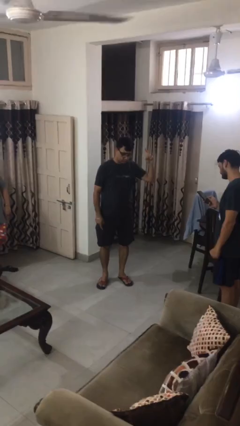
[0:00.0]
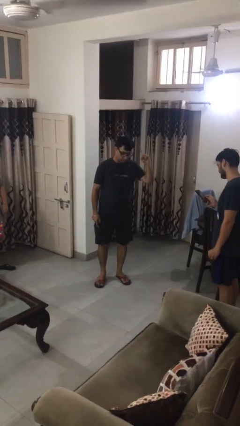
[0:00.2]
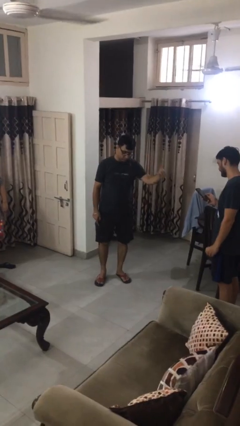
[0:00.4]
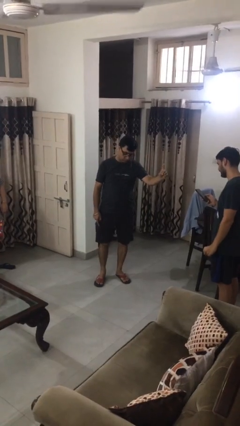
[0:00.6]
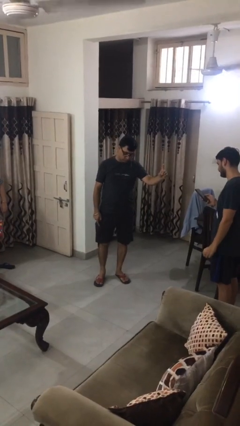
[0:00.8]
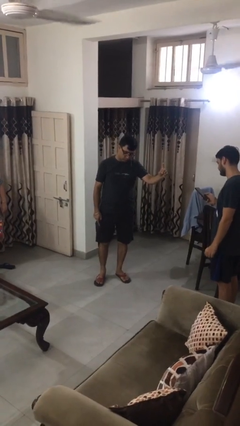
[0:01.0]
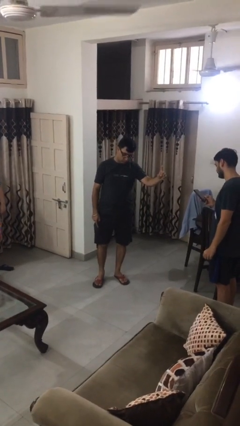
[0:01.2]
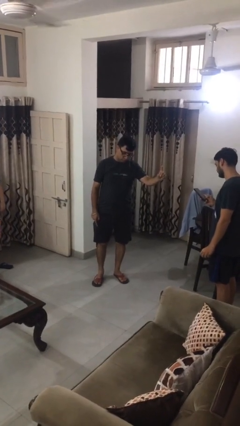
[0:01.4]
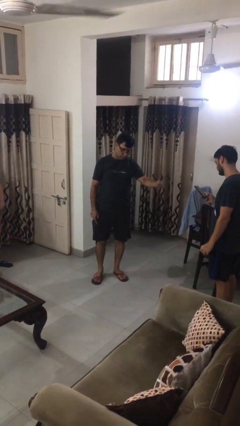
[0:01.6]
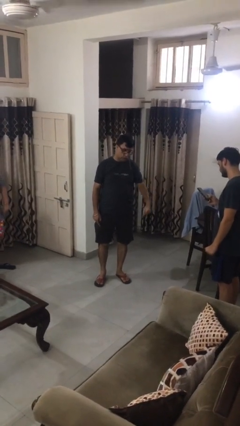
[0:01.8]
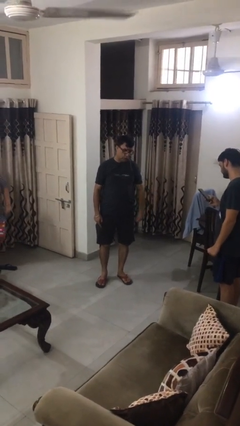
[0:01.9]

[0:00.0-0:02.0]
person points at person

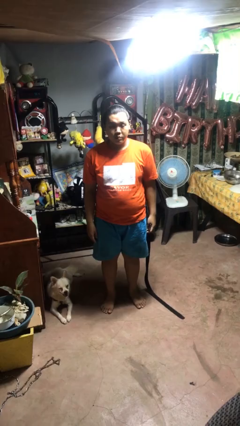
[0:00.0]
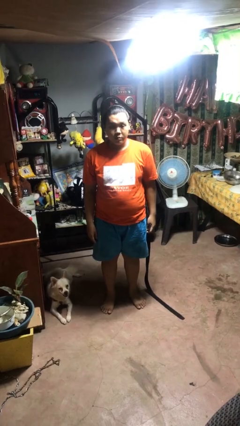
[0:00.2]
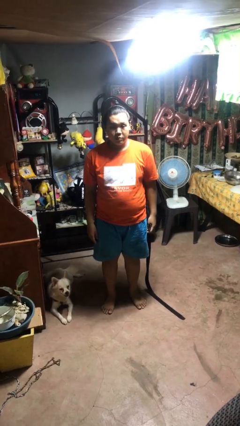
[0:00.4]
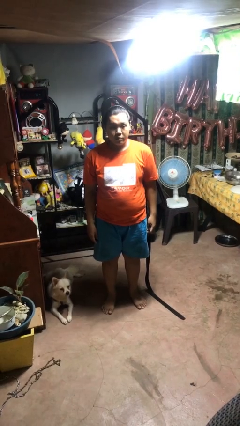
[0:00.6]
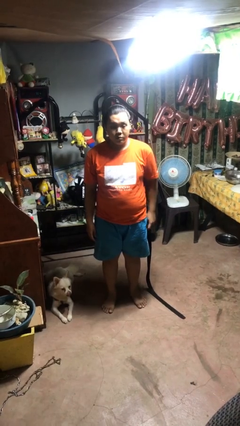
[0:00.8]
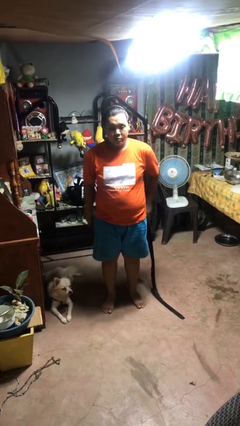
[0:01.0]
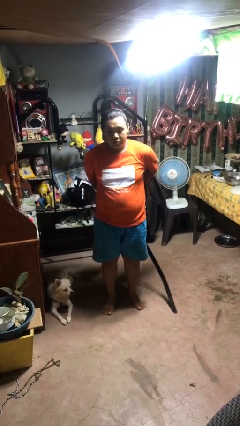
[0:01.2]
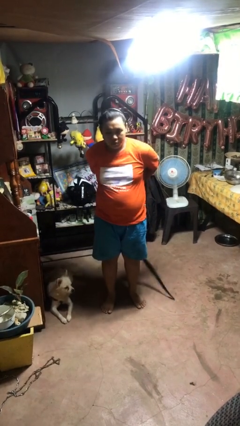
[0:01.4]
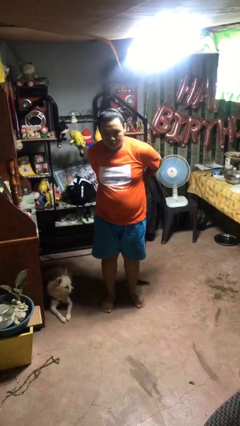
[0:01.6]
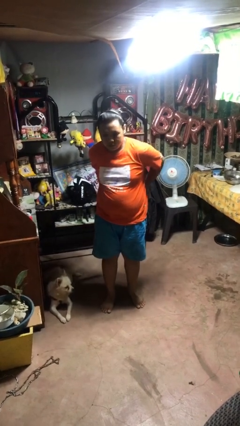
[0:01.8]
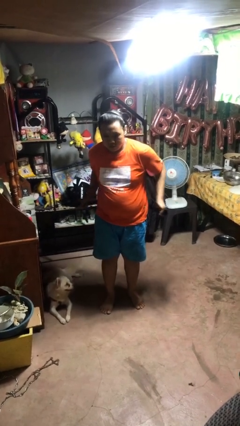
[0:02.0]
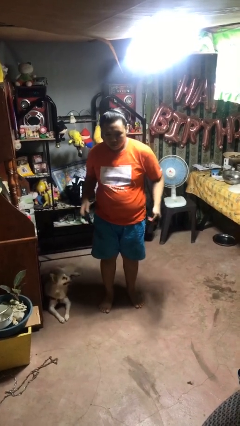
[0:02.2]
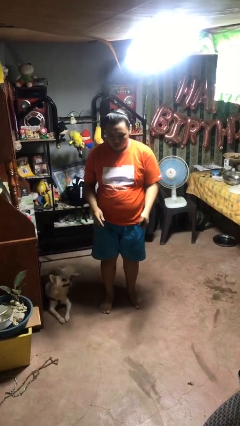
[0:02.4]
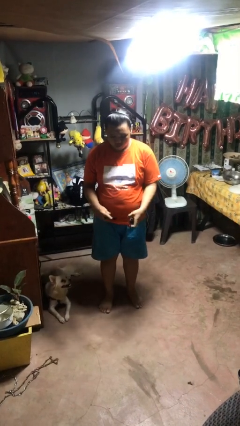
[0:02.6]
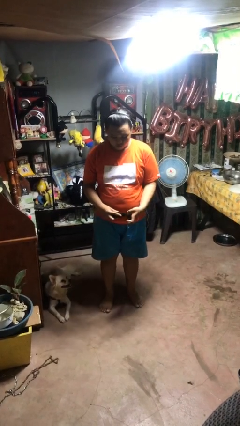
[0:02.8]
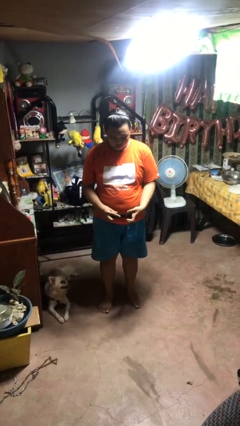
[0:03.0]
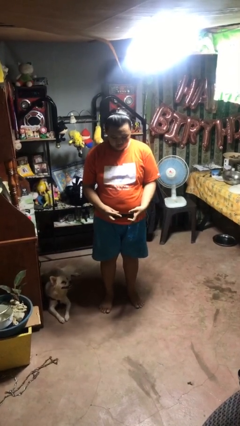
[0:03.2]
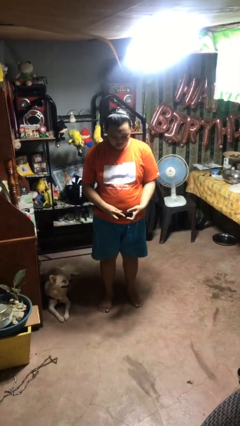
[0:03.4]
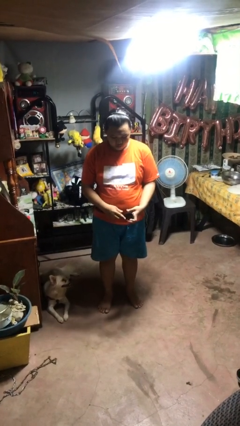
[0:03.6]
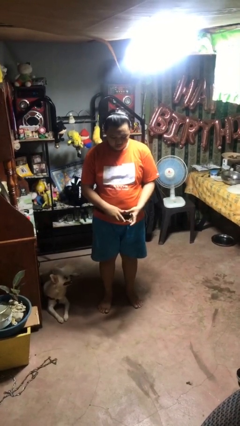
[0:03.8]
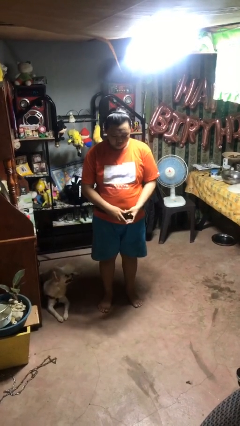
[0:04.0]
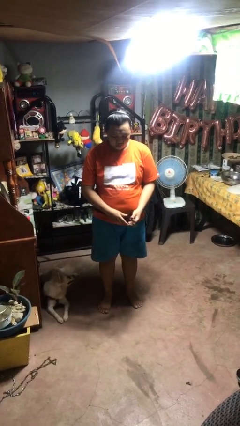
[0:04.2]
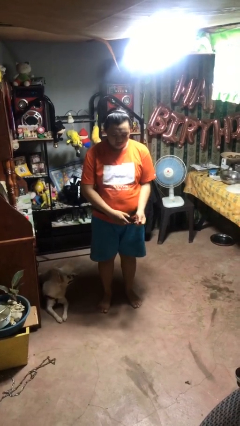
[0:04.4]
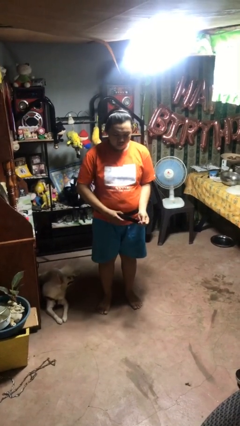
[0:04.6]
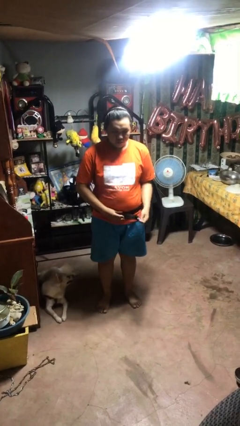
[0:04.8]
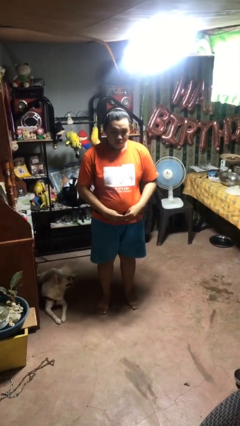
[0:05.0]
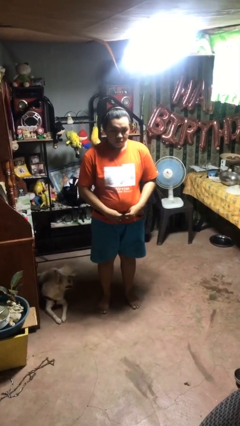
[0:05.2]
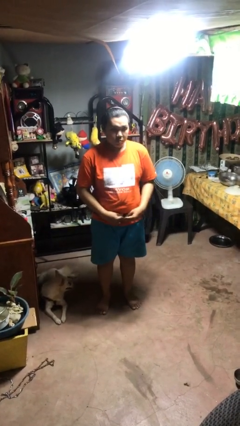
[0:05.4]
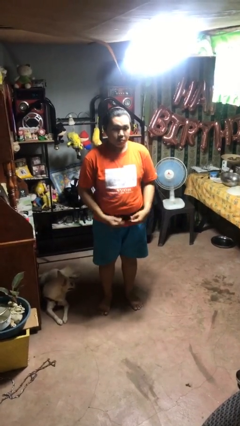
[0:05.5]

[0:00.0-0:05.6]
person puts on belt

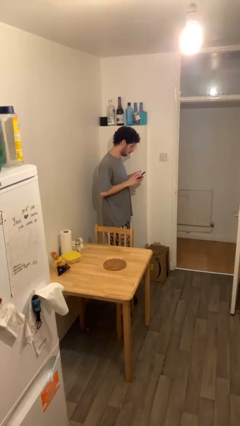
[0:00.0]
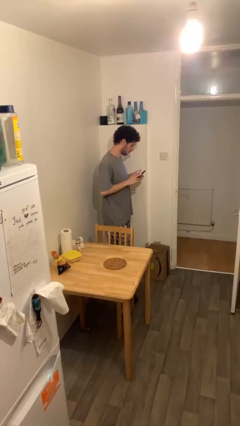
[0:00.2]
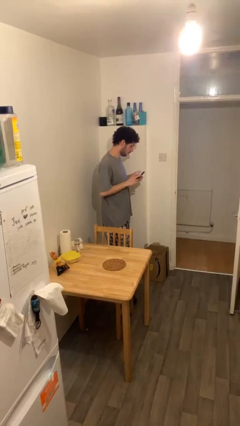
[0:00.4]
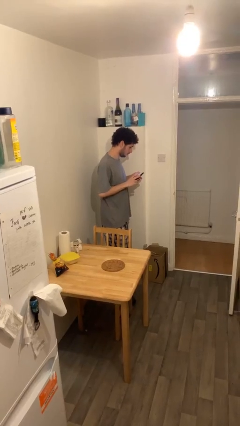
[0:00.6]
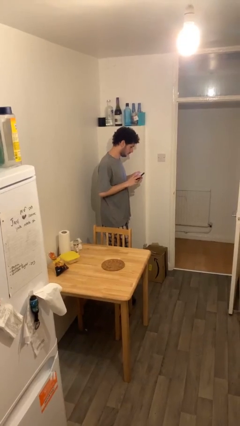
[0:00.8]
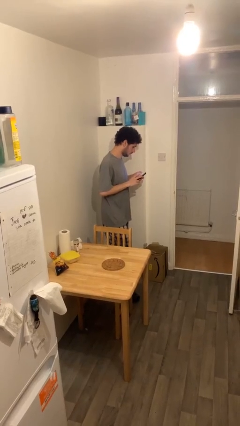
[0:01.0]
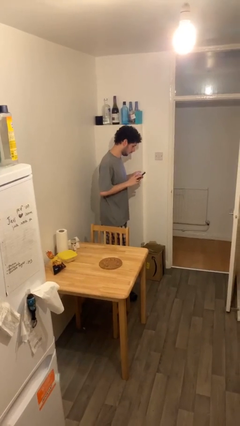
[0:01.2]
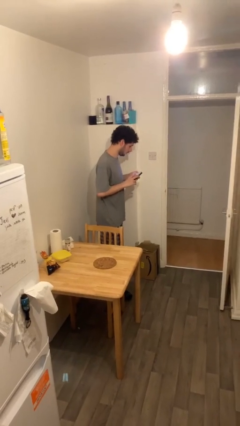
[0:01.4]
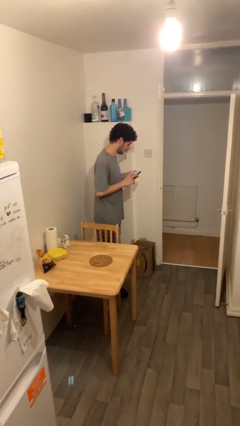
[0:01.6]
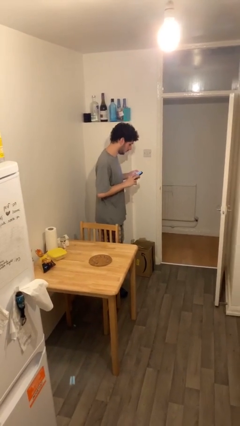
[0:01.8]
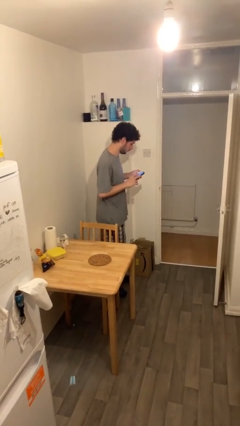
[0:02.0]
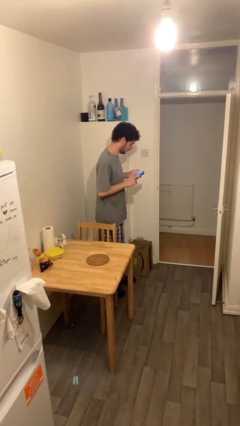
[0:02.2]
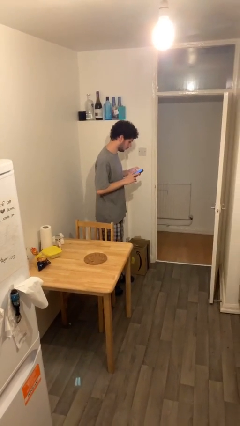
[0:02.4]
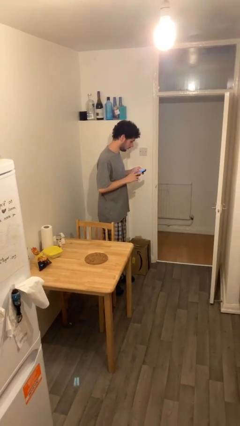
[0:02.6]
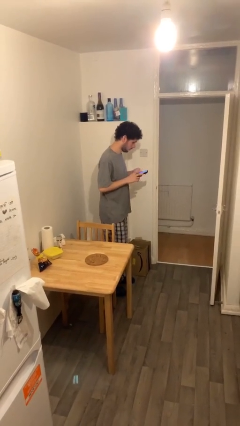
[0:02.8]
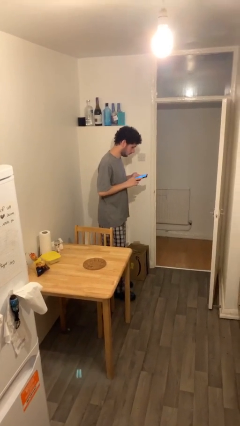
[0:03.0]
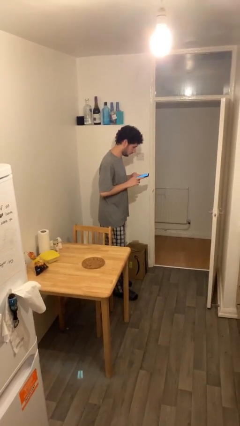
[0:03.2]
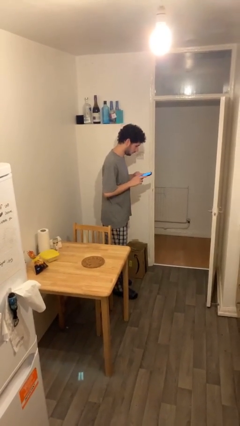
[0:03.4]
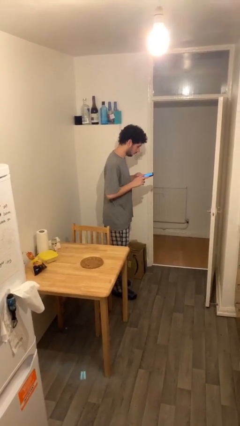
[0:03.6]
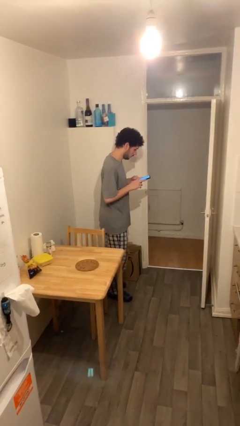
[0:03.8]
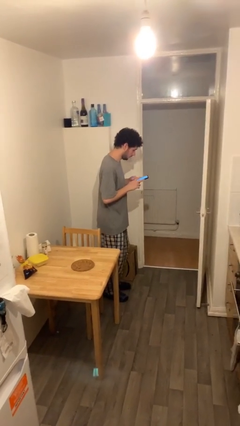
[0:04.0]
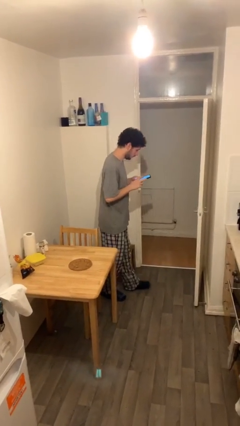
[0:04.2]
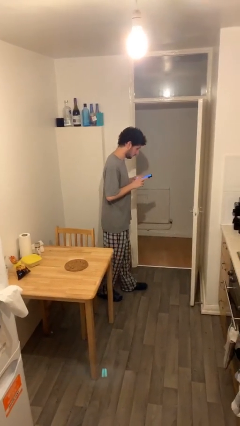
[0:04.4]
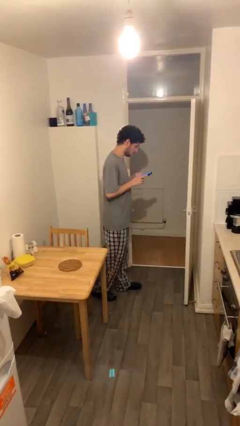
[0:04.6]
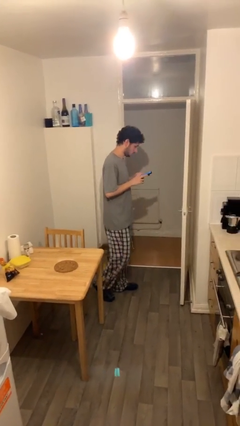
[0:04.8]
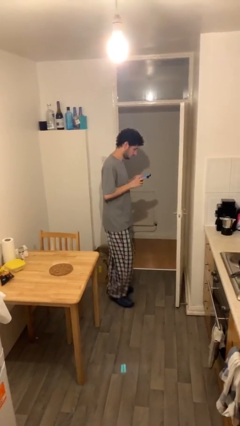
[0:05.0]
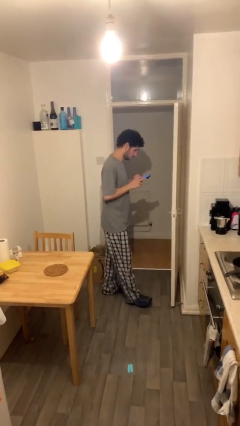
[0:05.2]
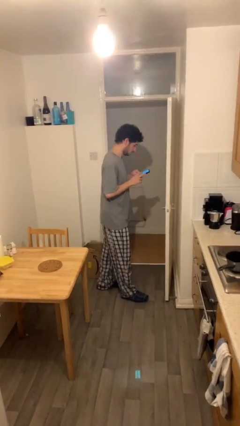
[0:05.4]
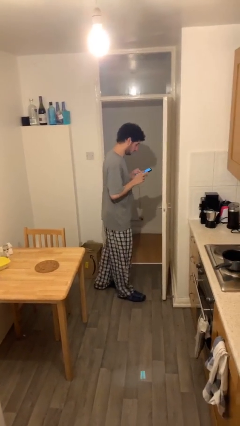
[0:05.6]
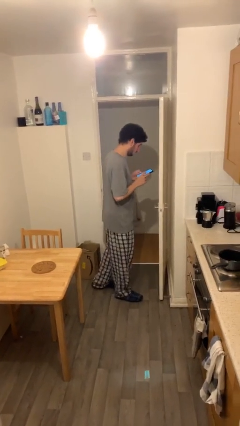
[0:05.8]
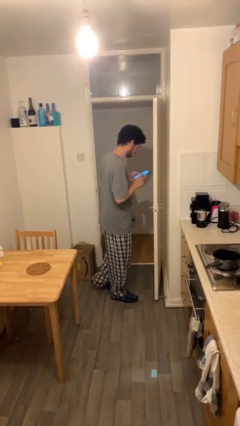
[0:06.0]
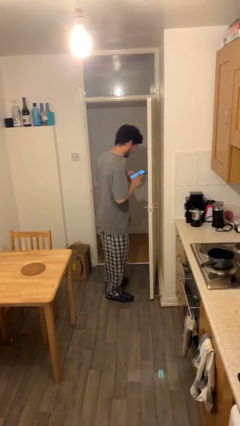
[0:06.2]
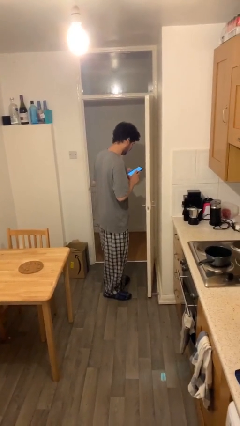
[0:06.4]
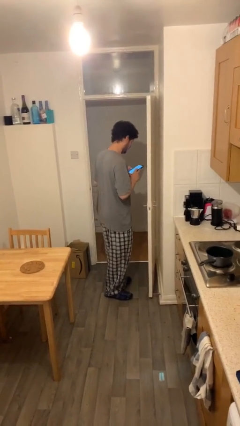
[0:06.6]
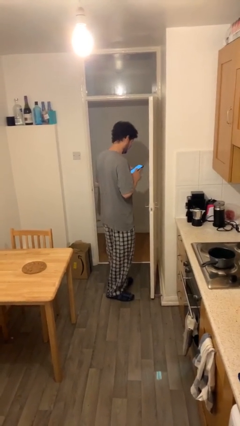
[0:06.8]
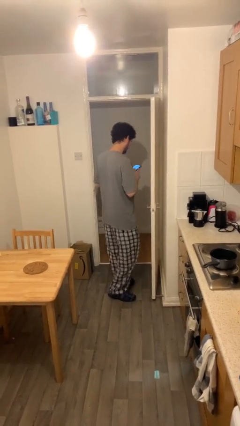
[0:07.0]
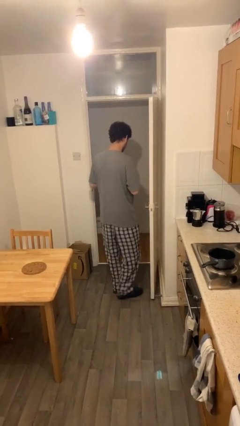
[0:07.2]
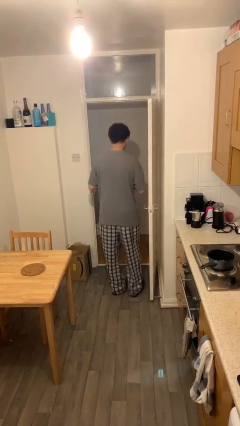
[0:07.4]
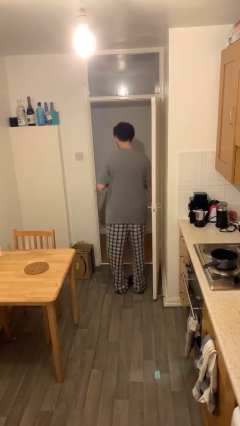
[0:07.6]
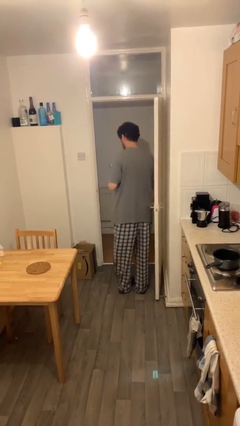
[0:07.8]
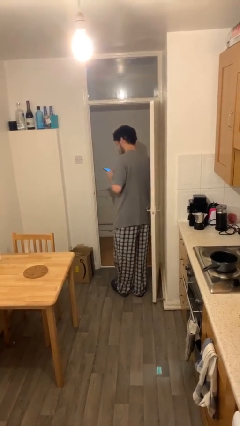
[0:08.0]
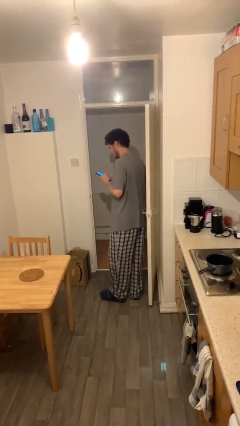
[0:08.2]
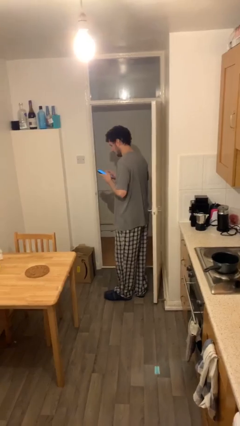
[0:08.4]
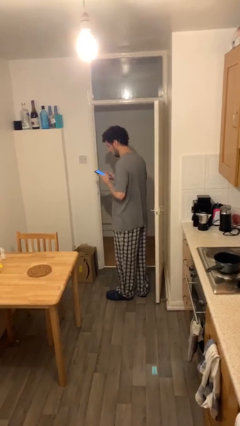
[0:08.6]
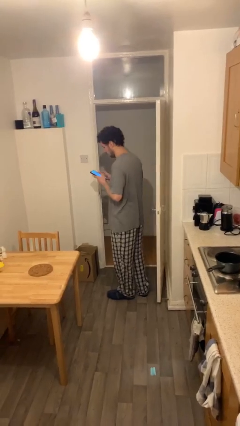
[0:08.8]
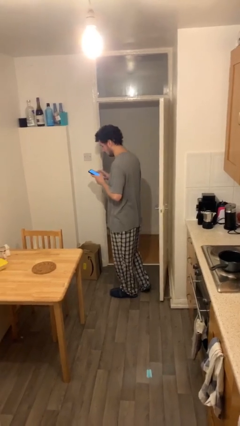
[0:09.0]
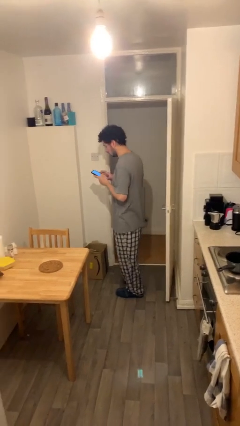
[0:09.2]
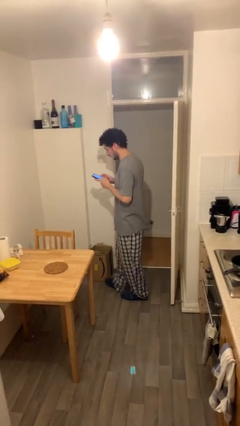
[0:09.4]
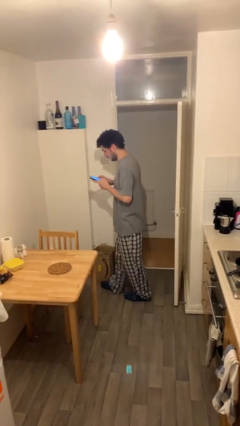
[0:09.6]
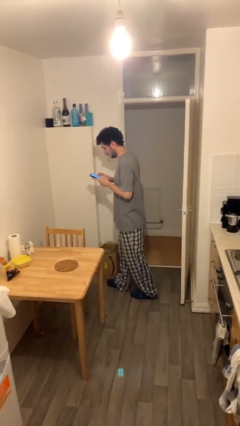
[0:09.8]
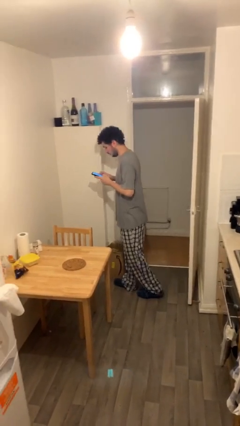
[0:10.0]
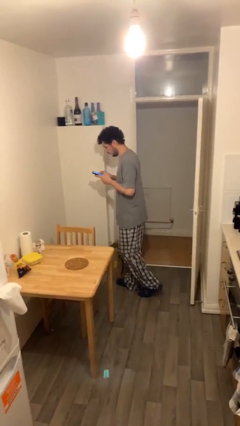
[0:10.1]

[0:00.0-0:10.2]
person texts on phone
